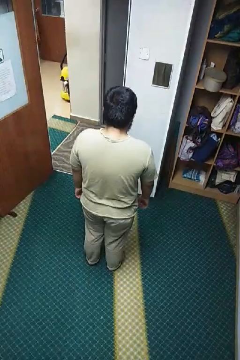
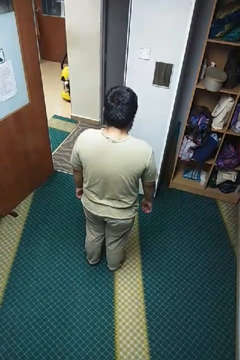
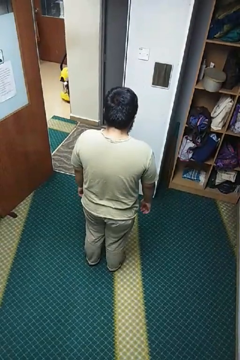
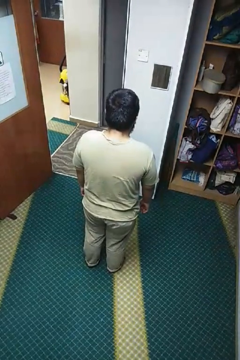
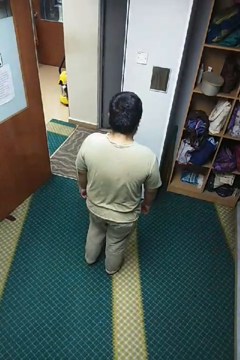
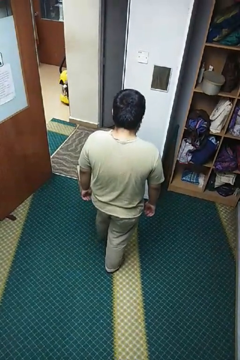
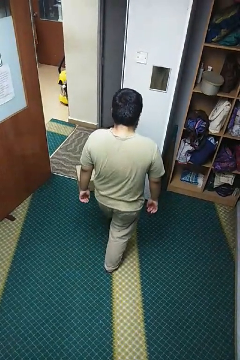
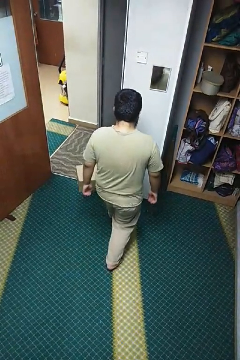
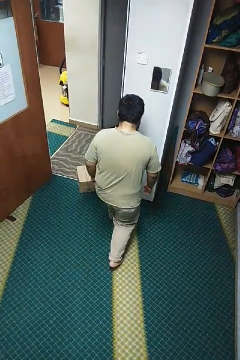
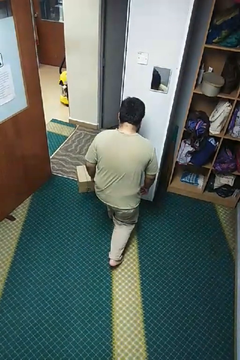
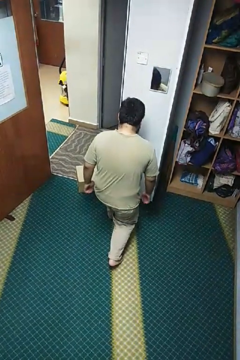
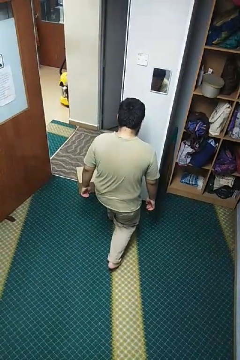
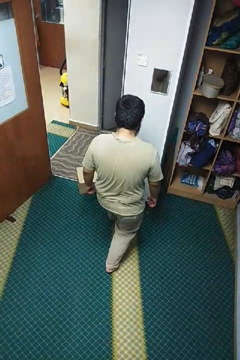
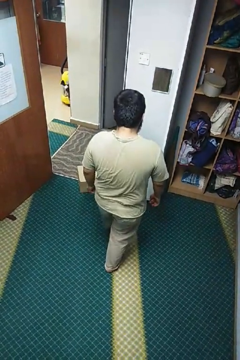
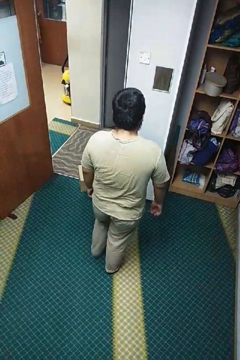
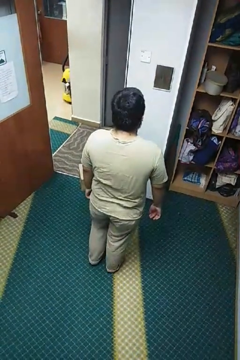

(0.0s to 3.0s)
person exercises with lunges

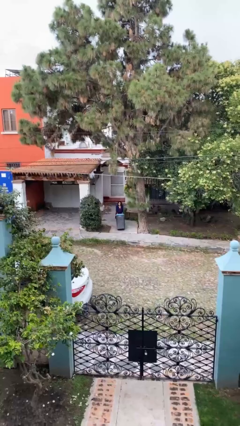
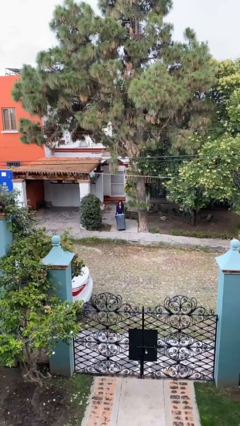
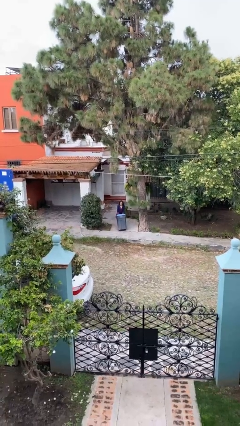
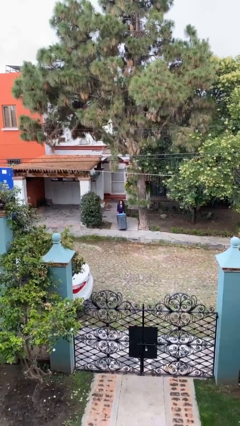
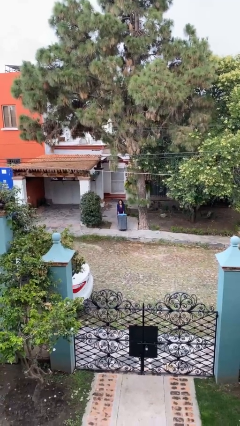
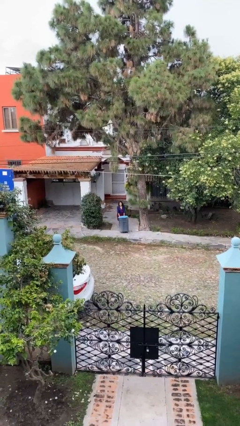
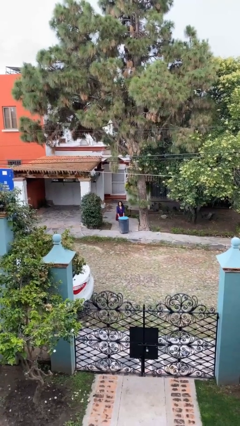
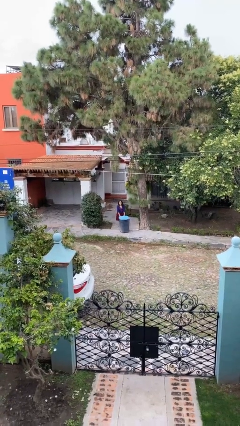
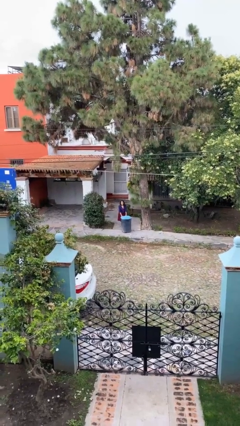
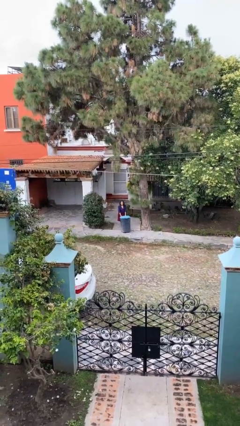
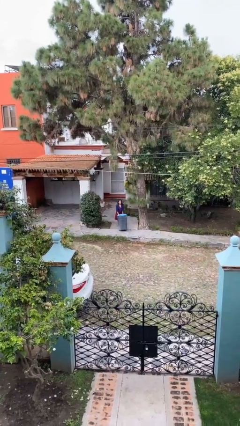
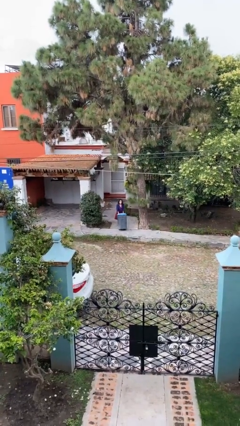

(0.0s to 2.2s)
person pushes wheeled trashcan

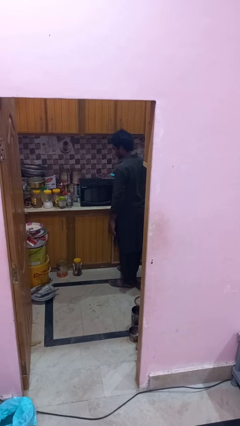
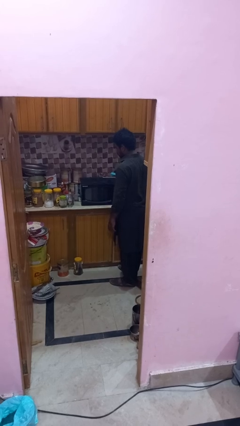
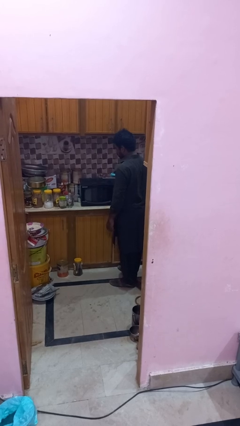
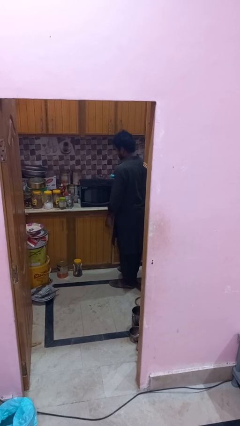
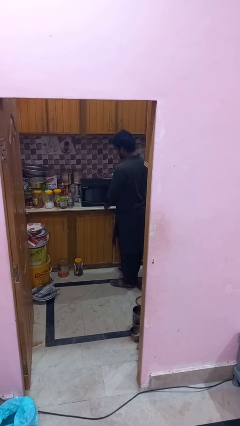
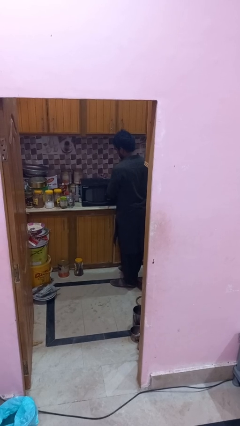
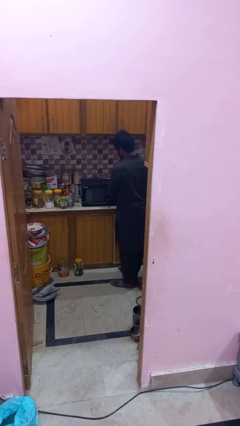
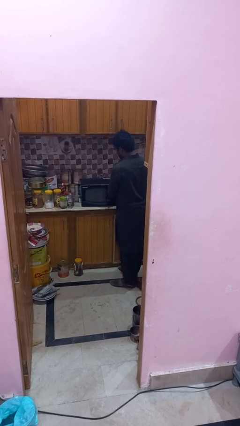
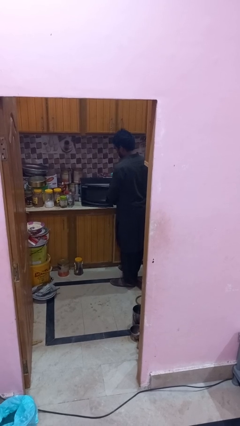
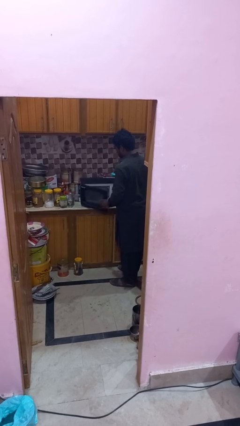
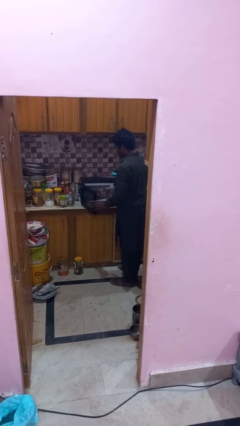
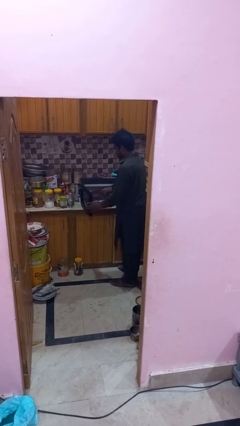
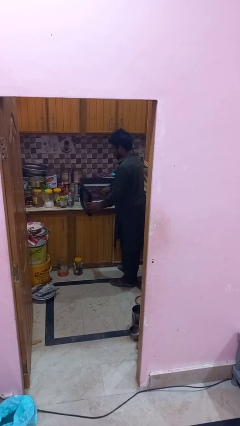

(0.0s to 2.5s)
person takes object from microwave

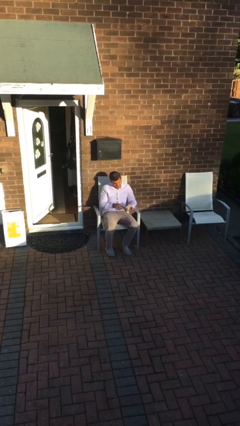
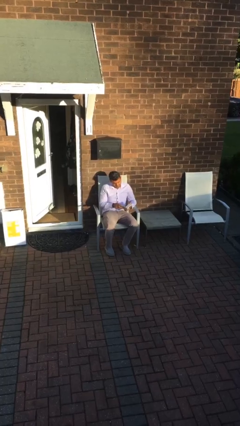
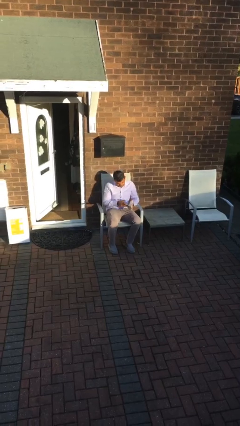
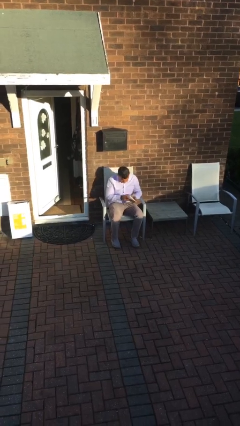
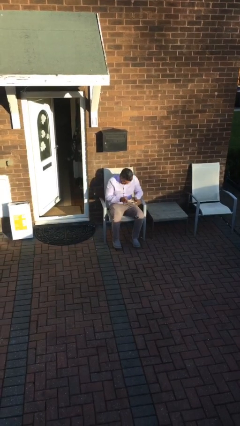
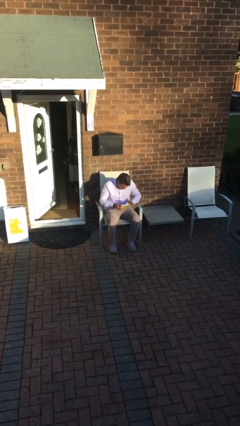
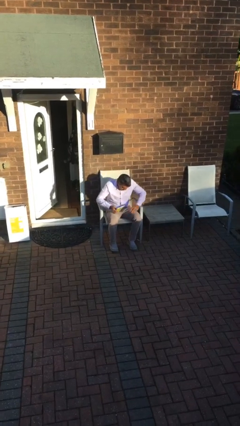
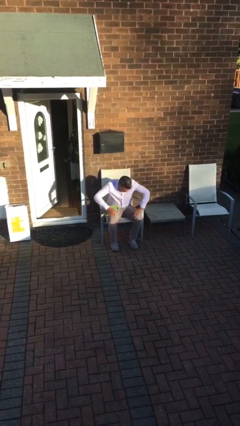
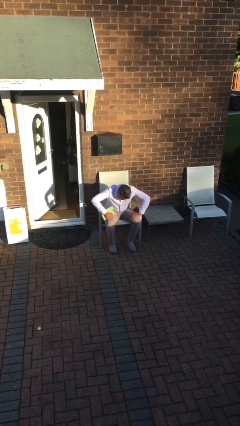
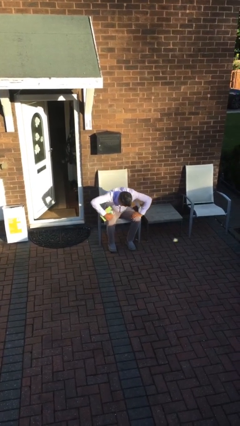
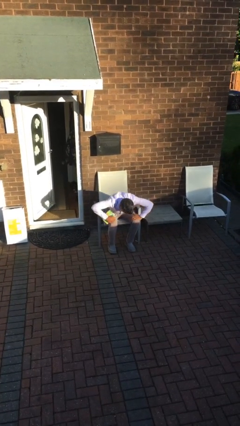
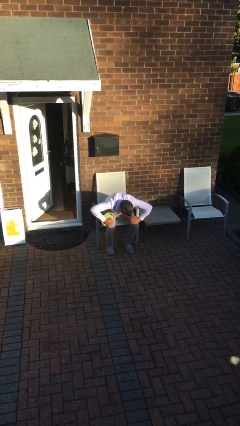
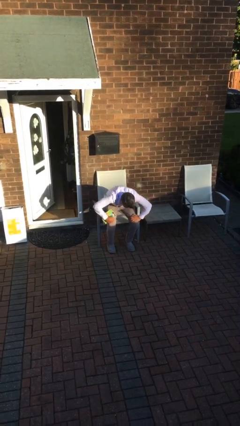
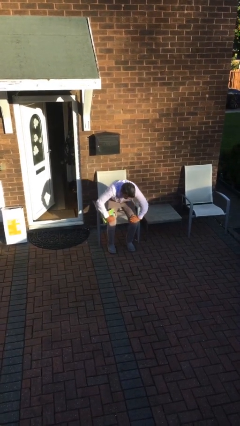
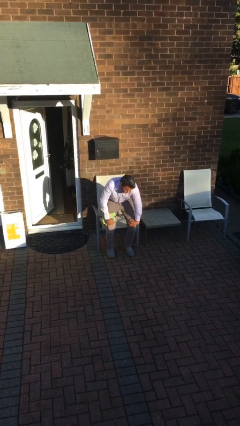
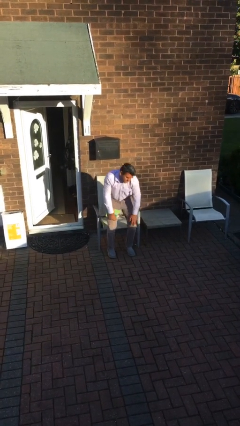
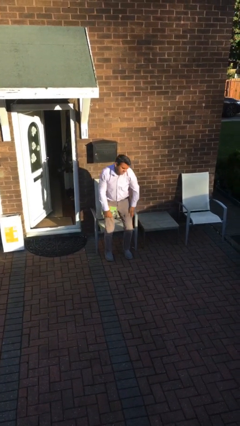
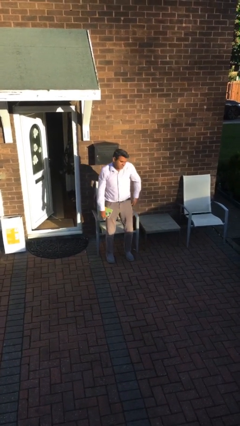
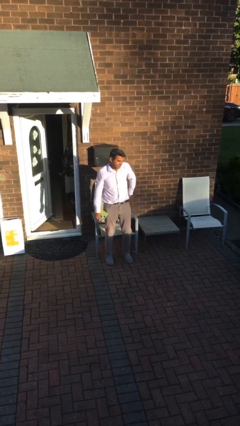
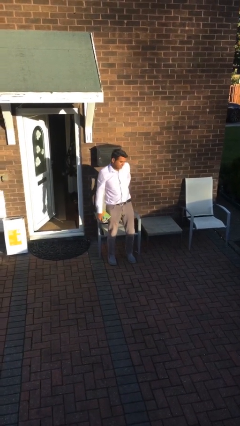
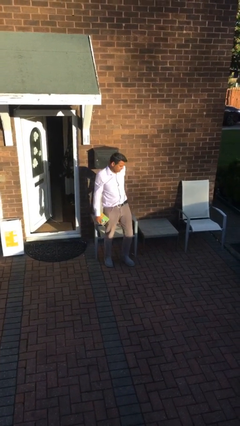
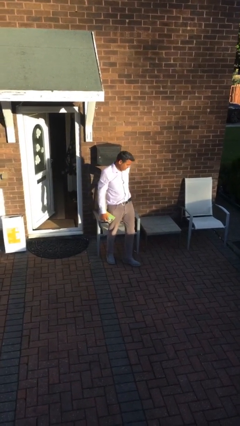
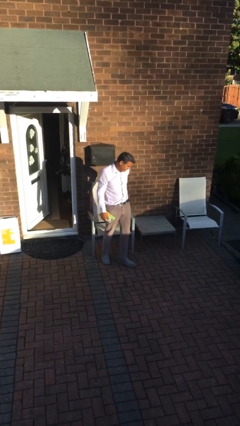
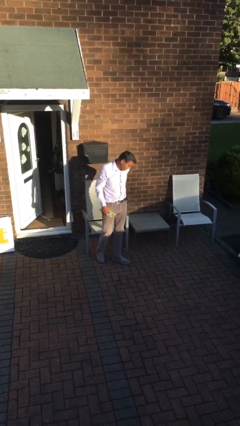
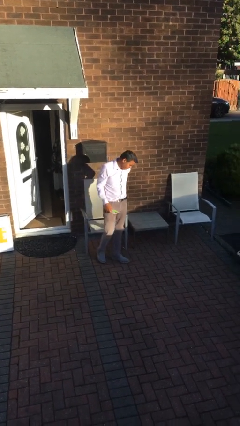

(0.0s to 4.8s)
person stands up

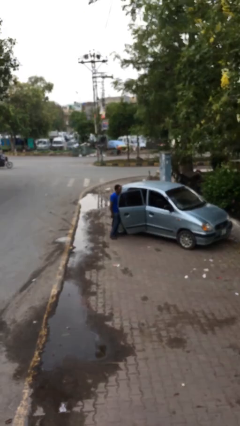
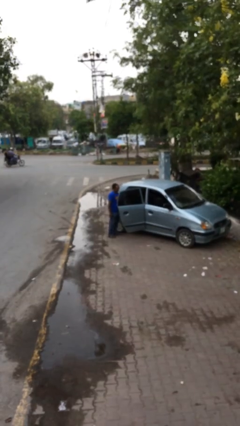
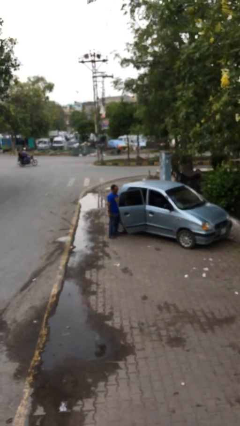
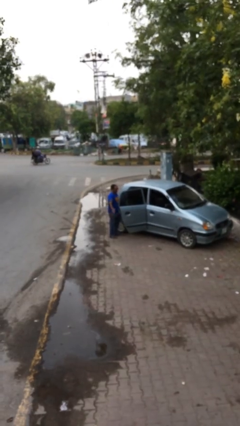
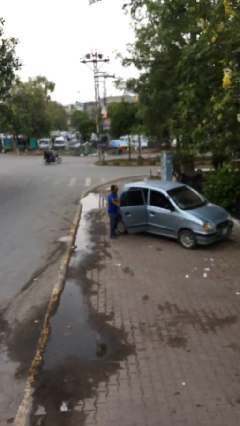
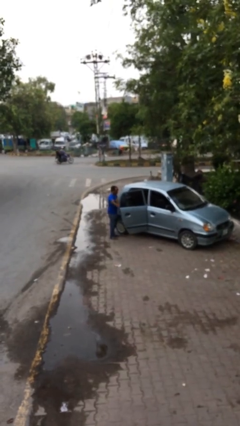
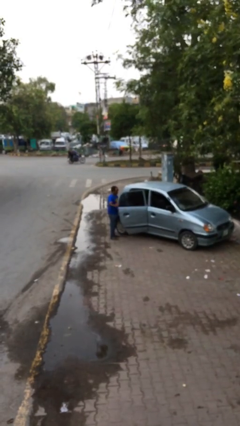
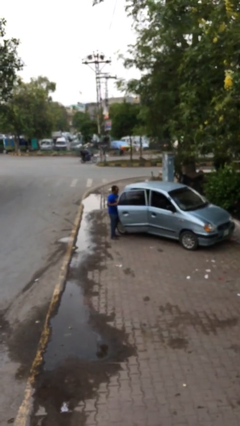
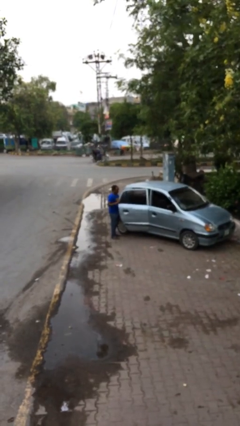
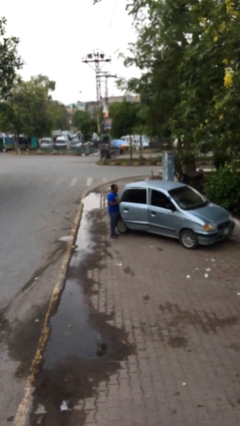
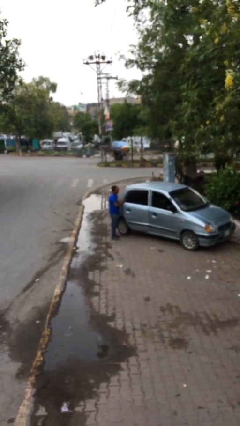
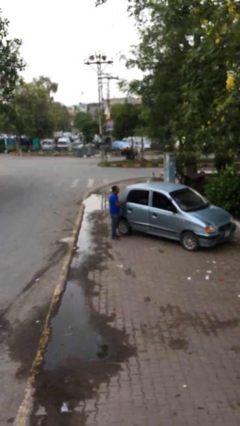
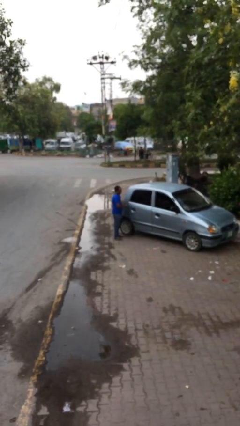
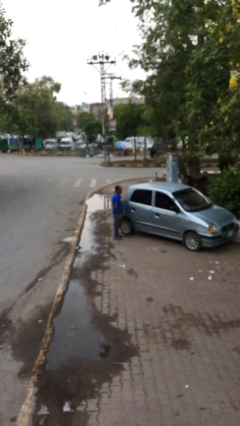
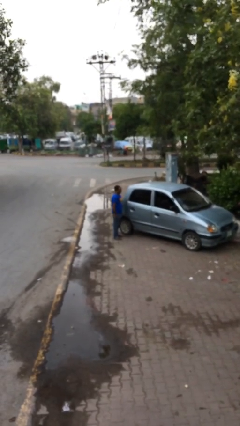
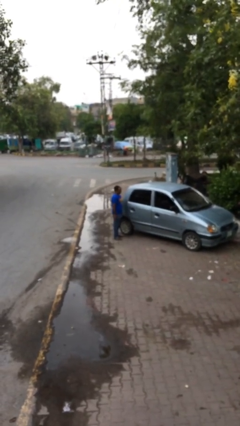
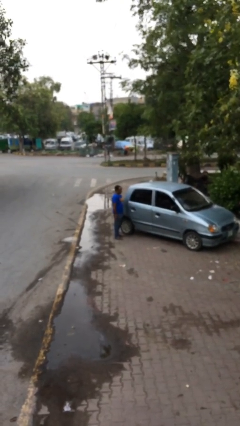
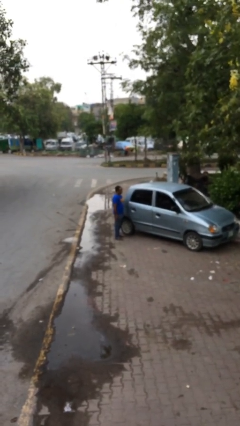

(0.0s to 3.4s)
person closes car door

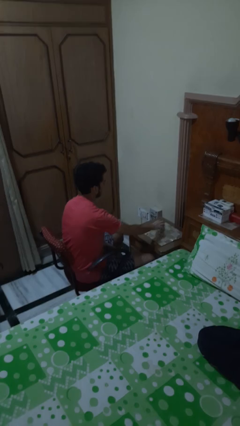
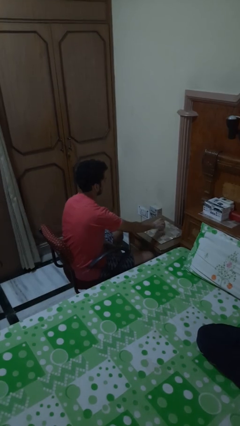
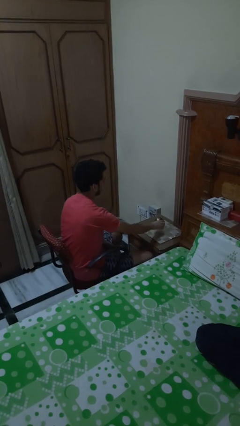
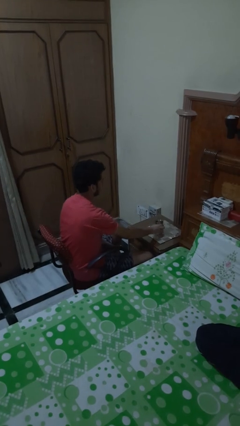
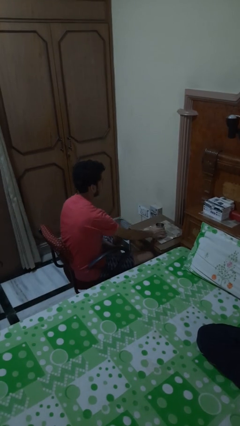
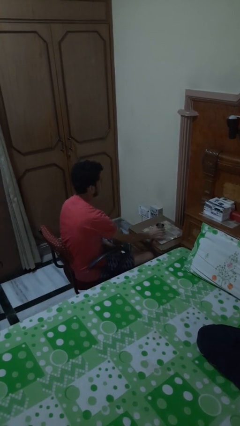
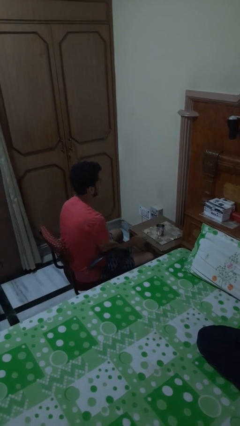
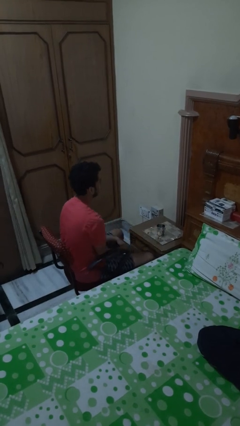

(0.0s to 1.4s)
person sets upright glass

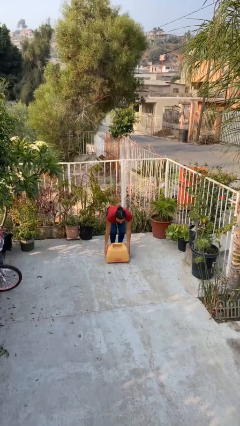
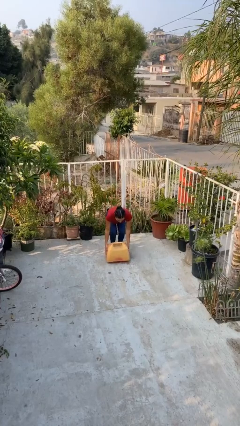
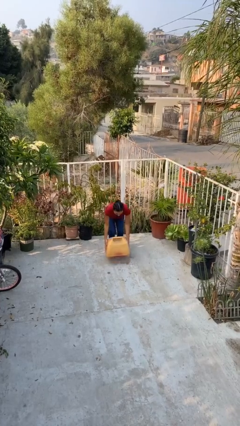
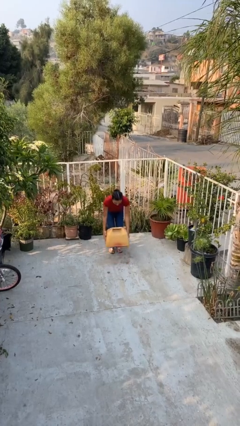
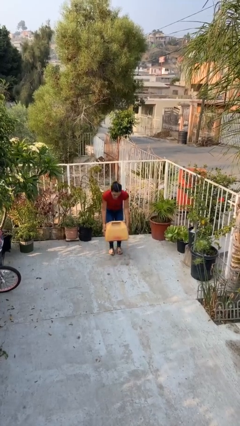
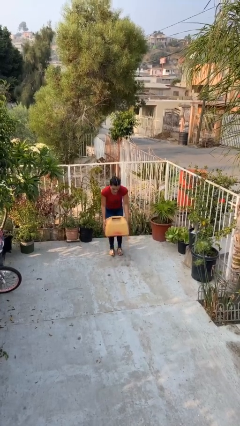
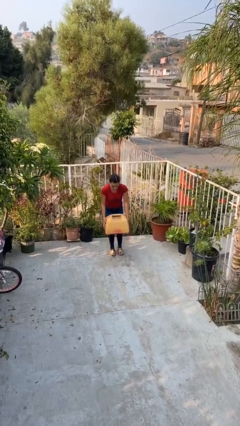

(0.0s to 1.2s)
person picks up object from floor
